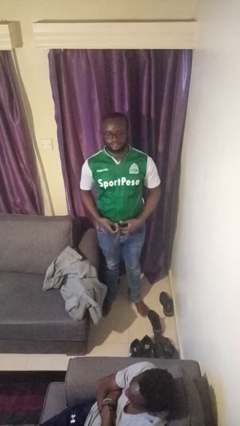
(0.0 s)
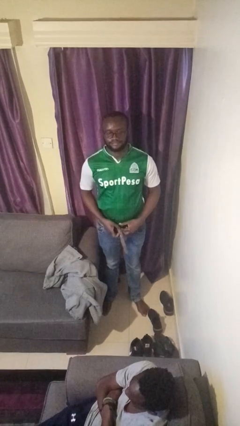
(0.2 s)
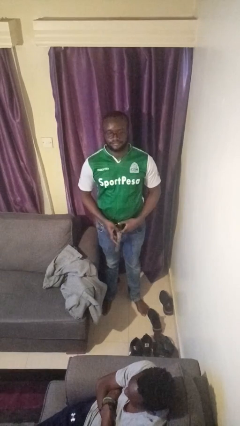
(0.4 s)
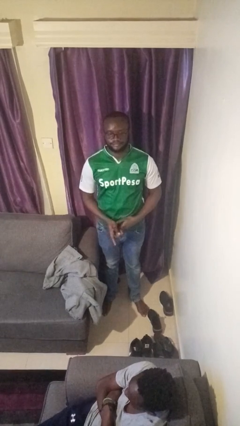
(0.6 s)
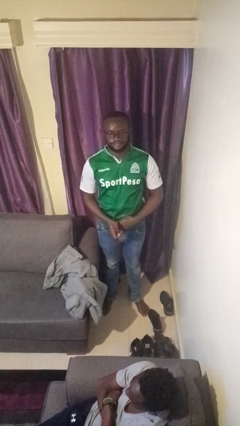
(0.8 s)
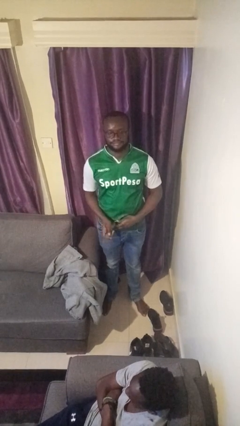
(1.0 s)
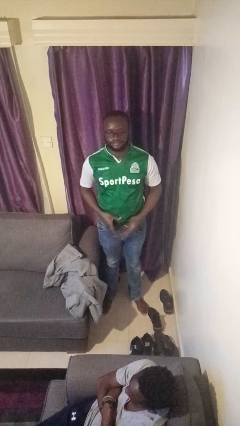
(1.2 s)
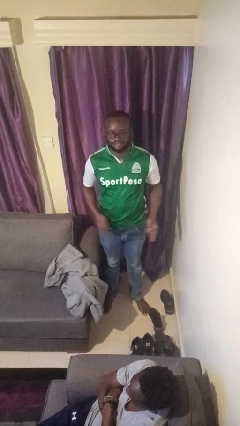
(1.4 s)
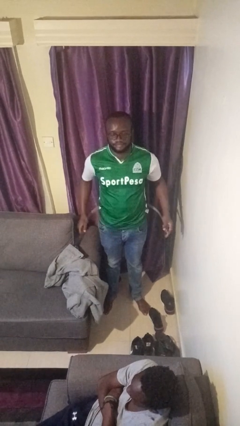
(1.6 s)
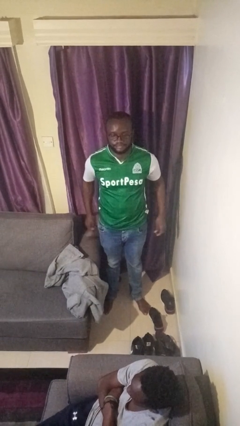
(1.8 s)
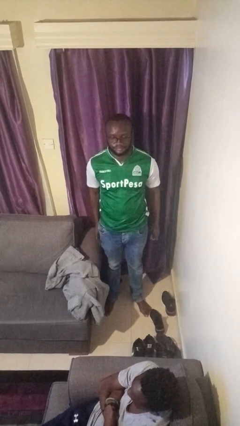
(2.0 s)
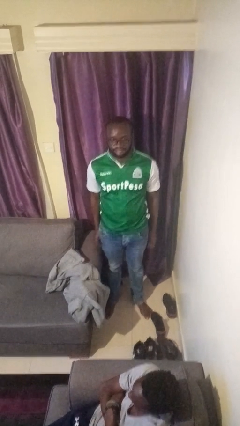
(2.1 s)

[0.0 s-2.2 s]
person takes off belt

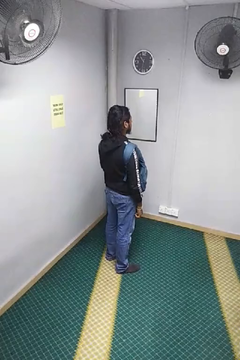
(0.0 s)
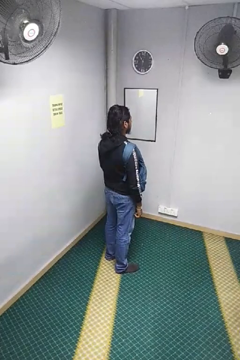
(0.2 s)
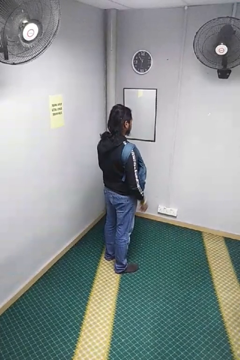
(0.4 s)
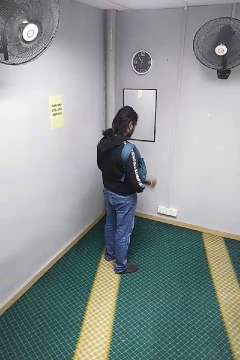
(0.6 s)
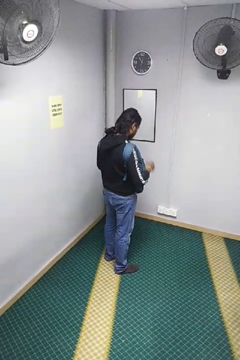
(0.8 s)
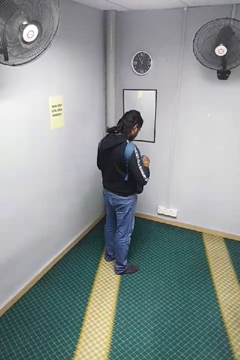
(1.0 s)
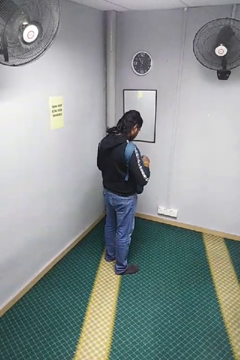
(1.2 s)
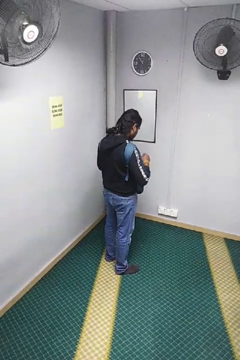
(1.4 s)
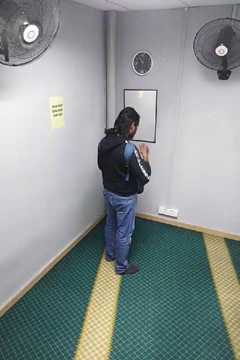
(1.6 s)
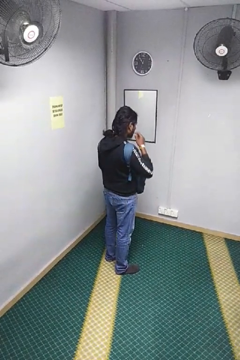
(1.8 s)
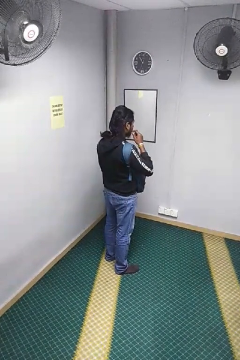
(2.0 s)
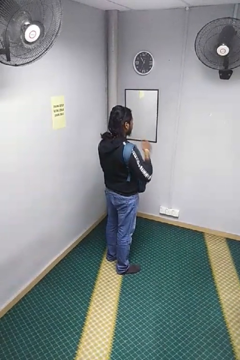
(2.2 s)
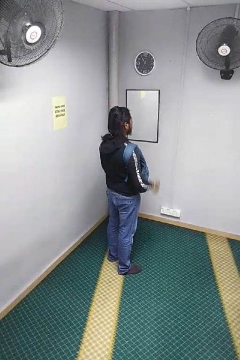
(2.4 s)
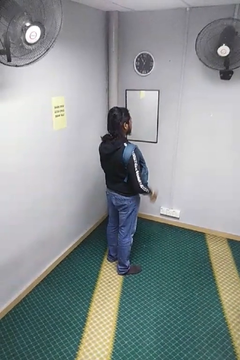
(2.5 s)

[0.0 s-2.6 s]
person eats snack from bag

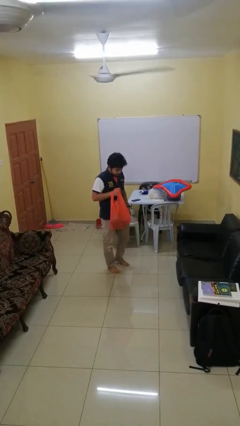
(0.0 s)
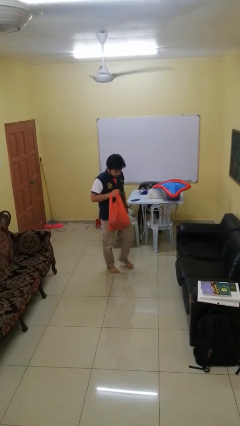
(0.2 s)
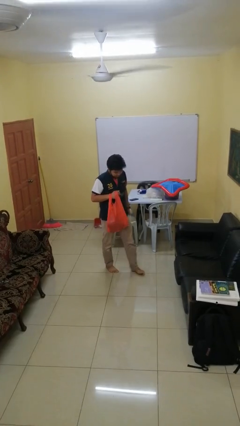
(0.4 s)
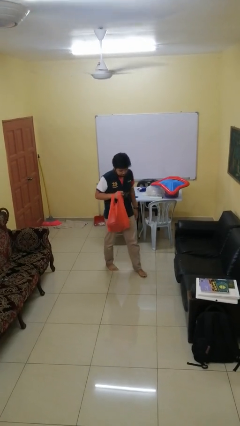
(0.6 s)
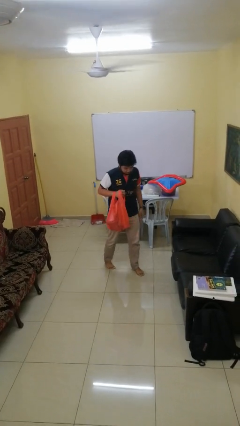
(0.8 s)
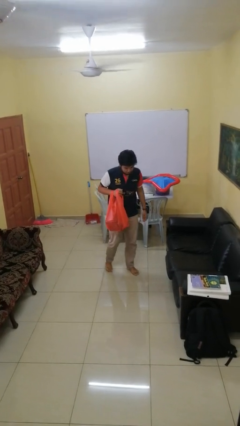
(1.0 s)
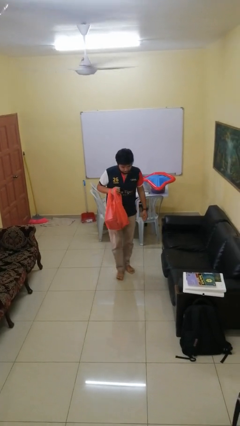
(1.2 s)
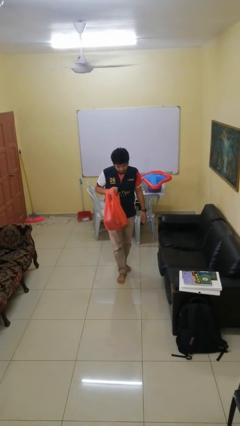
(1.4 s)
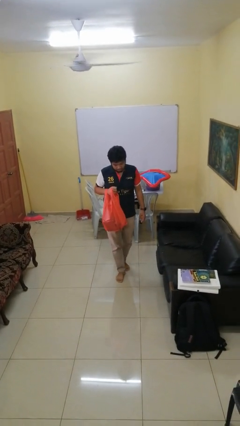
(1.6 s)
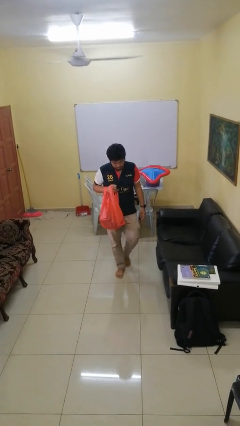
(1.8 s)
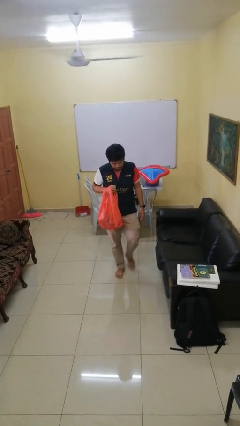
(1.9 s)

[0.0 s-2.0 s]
person carries groceries

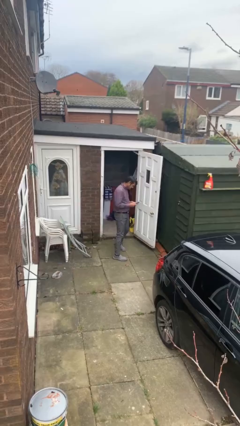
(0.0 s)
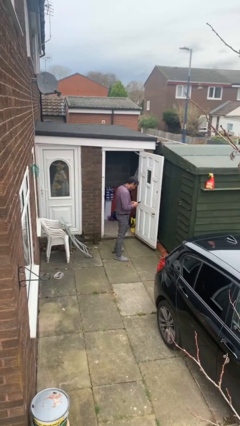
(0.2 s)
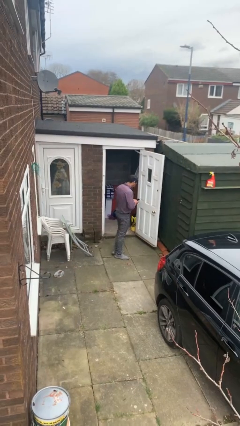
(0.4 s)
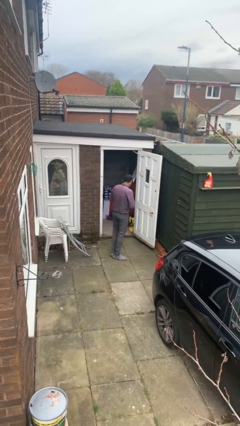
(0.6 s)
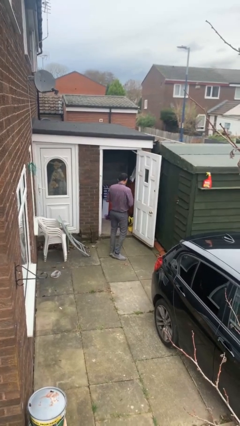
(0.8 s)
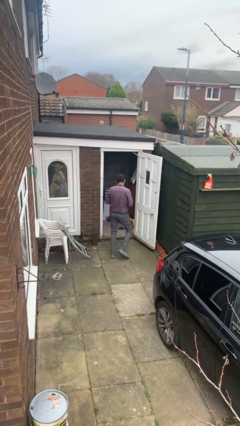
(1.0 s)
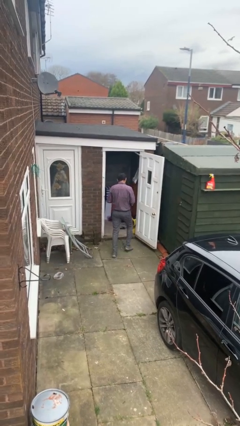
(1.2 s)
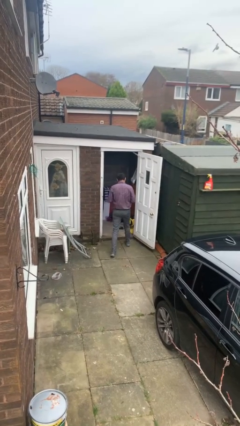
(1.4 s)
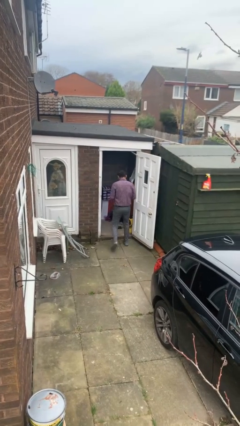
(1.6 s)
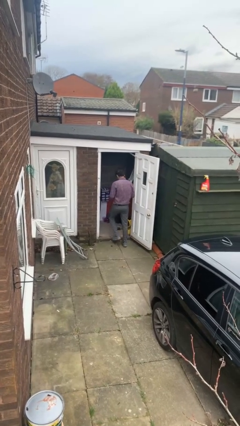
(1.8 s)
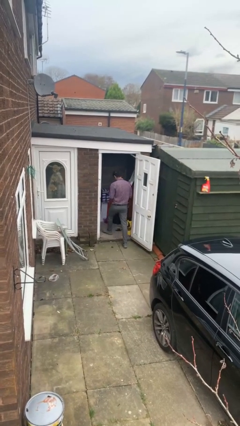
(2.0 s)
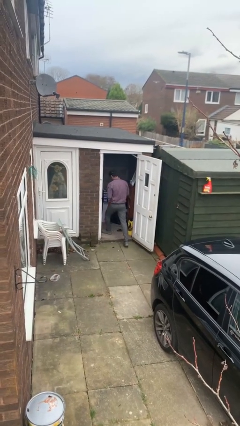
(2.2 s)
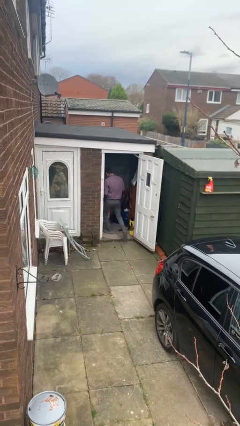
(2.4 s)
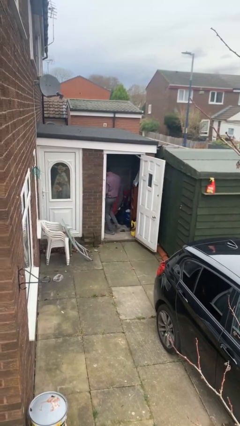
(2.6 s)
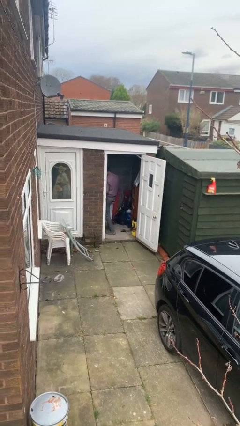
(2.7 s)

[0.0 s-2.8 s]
person exits scene through structure

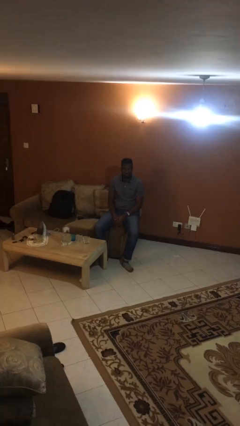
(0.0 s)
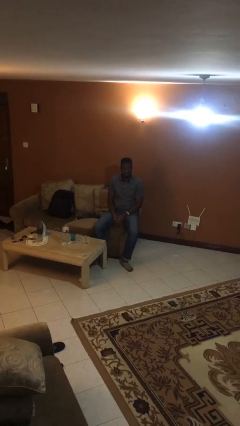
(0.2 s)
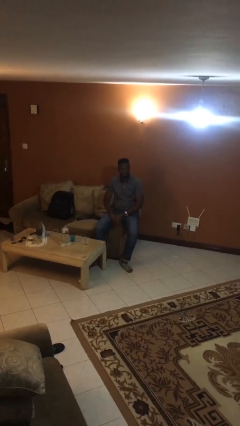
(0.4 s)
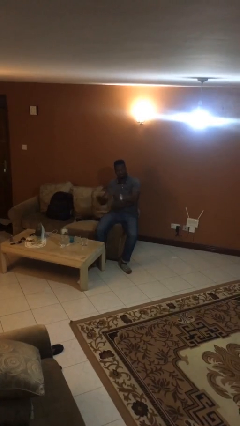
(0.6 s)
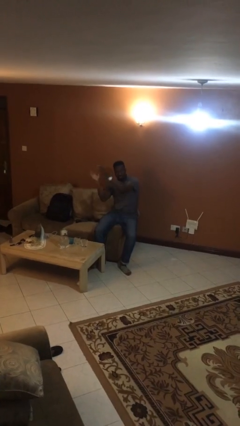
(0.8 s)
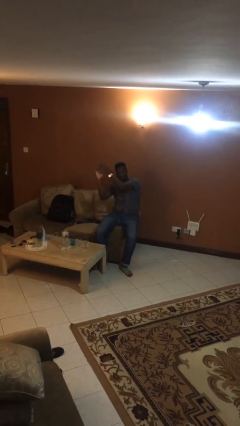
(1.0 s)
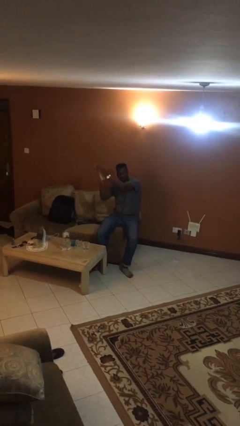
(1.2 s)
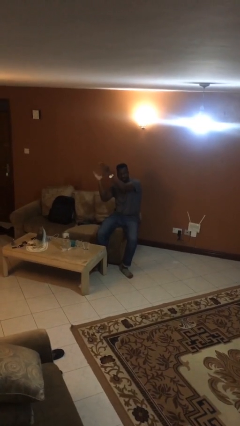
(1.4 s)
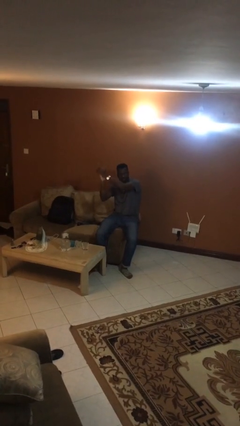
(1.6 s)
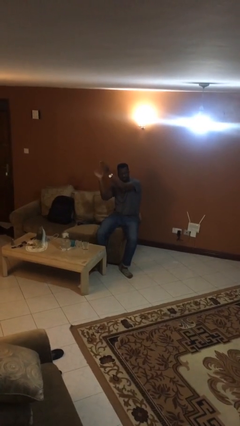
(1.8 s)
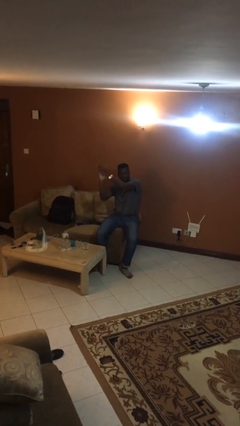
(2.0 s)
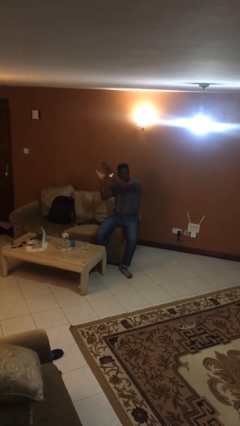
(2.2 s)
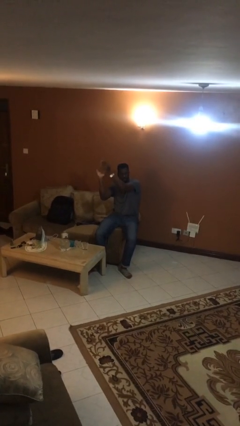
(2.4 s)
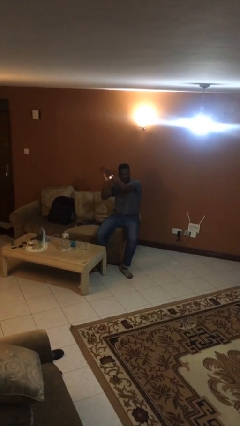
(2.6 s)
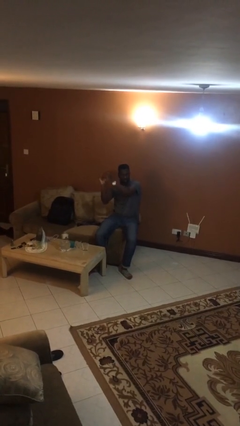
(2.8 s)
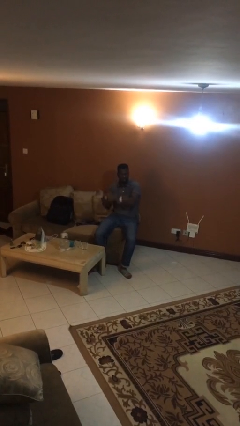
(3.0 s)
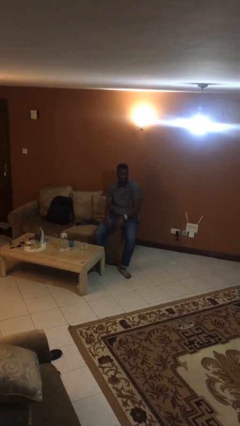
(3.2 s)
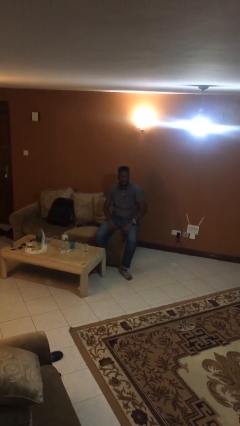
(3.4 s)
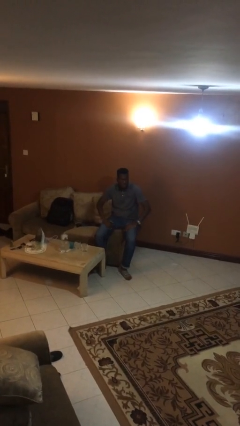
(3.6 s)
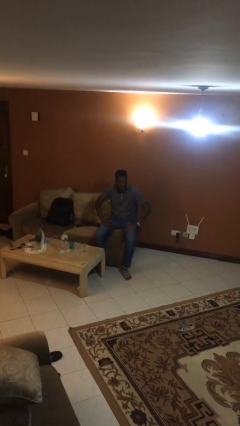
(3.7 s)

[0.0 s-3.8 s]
person claps hands

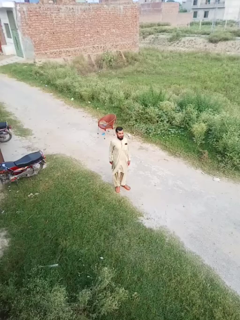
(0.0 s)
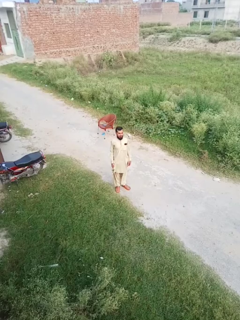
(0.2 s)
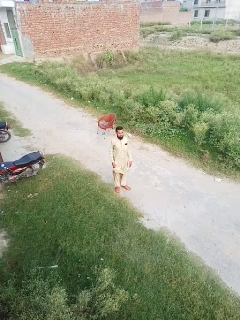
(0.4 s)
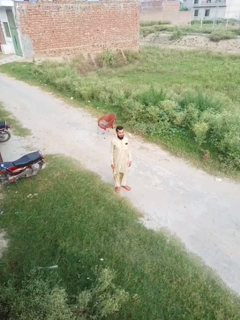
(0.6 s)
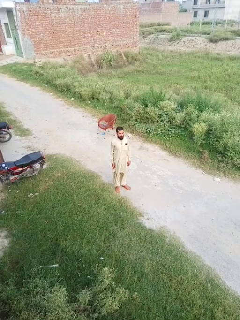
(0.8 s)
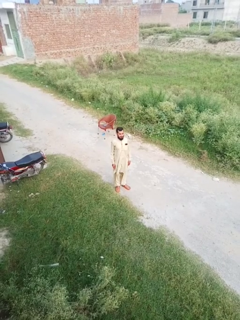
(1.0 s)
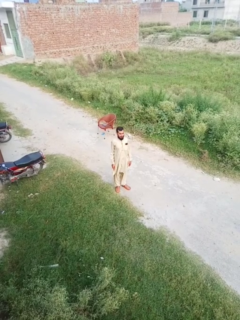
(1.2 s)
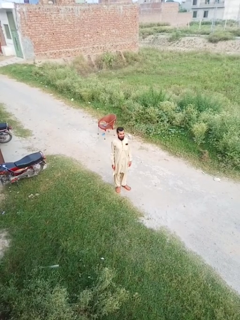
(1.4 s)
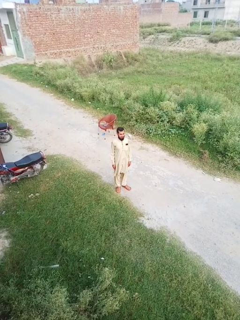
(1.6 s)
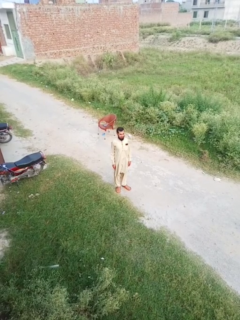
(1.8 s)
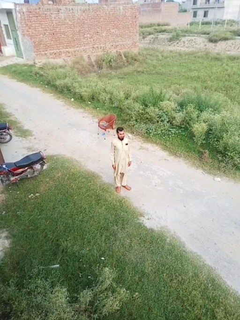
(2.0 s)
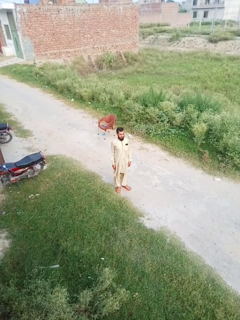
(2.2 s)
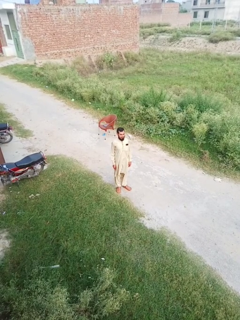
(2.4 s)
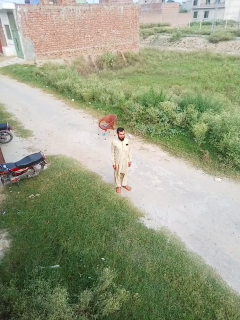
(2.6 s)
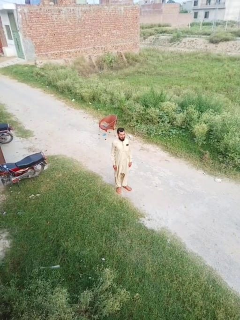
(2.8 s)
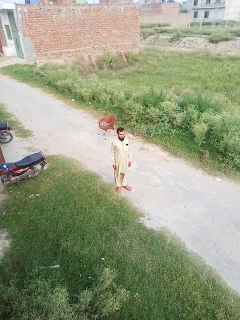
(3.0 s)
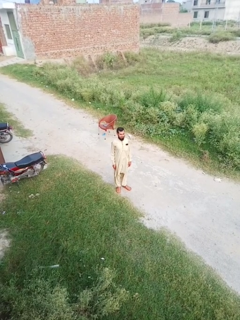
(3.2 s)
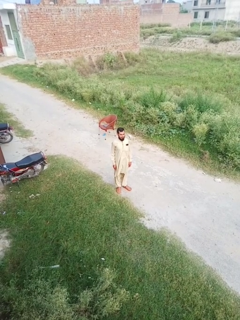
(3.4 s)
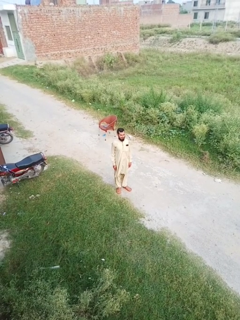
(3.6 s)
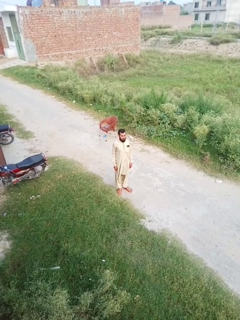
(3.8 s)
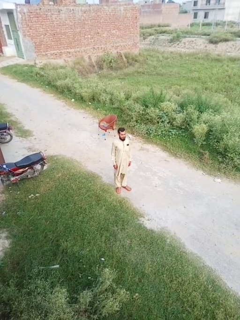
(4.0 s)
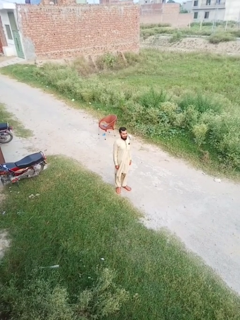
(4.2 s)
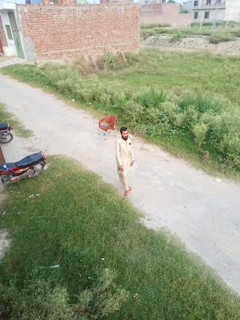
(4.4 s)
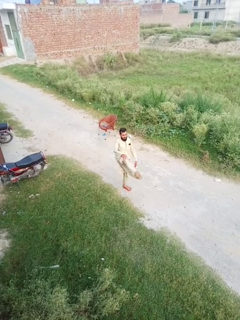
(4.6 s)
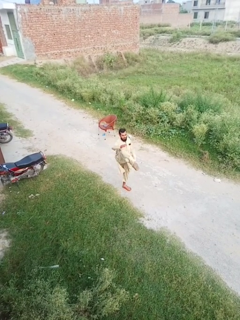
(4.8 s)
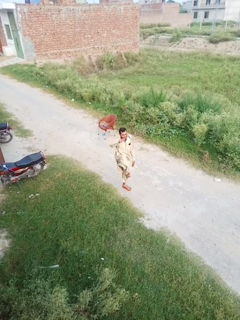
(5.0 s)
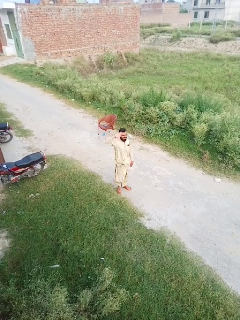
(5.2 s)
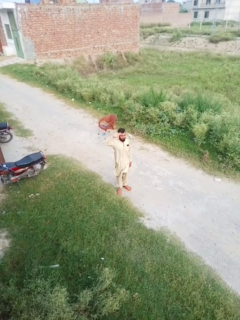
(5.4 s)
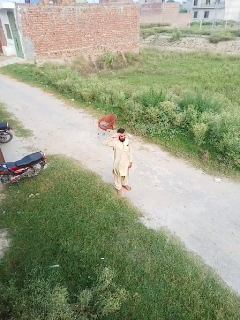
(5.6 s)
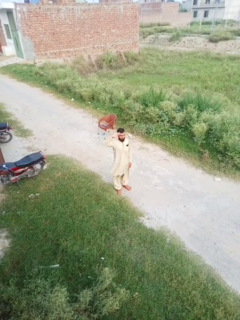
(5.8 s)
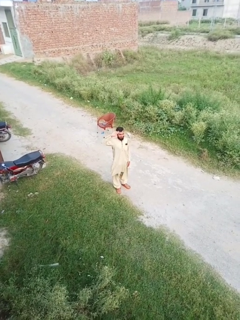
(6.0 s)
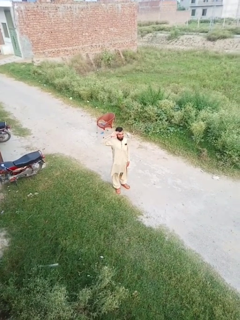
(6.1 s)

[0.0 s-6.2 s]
person salutes
